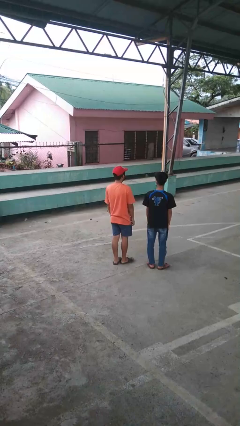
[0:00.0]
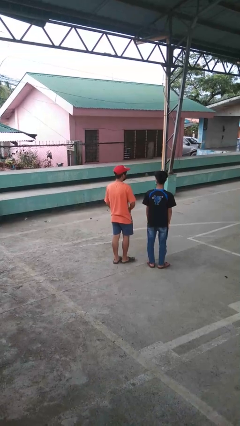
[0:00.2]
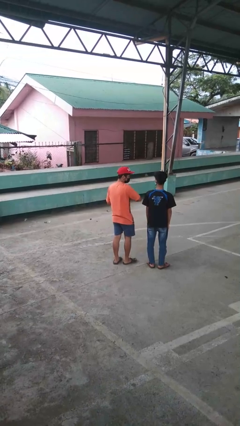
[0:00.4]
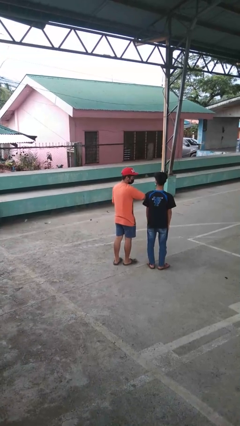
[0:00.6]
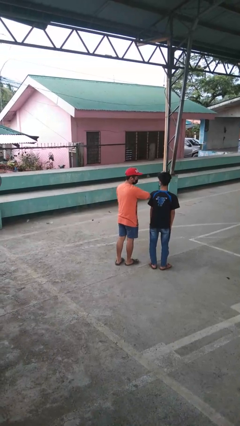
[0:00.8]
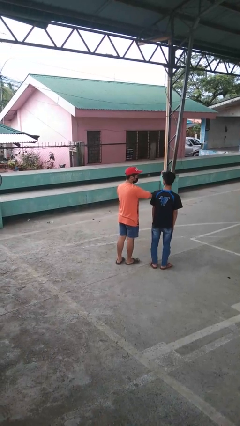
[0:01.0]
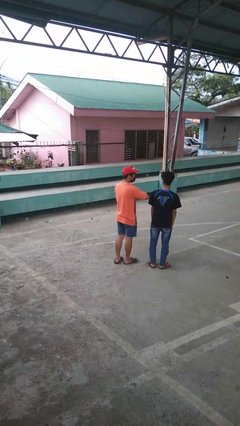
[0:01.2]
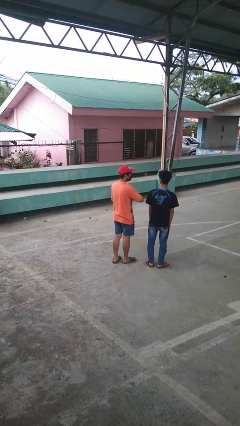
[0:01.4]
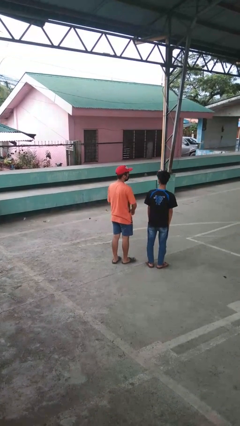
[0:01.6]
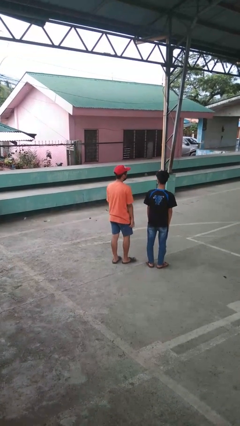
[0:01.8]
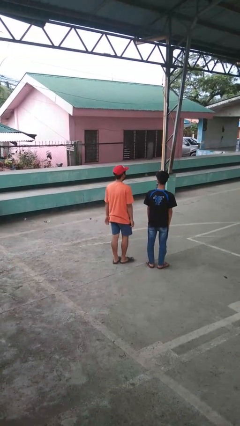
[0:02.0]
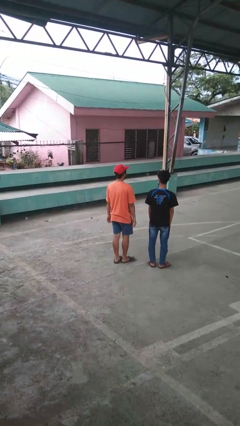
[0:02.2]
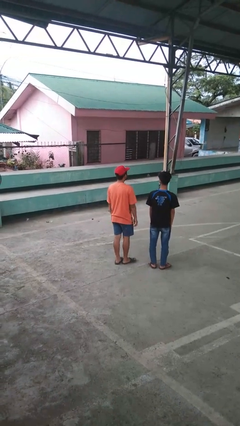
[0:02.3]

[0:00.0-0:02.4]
person nudges person with elbow

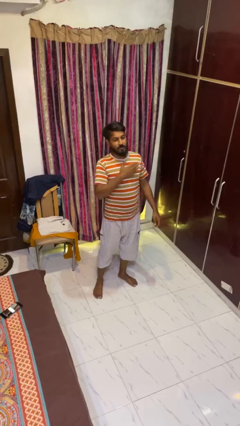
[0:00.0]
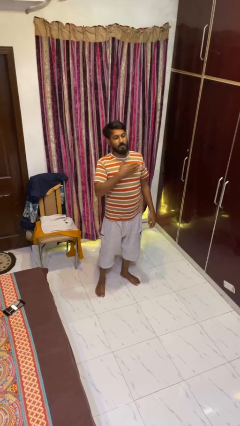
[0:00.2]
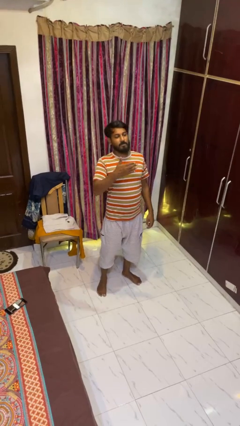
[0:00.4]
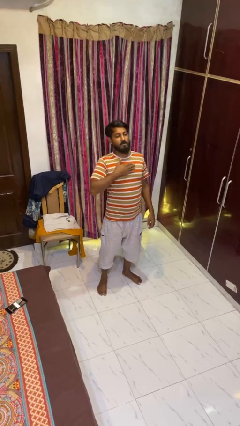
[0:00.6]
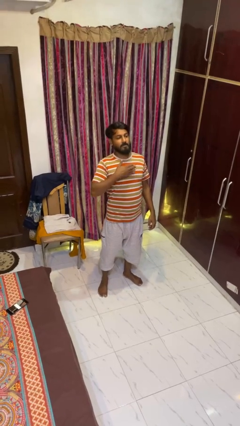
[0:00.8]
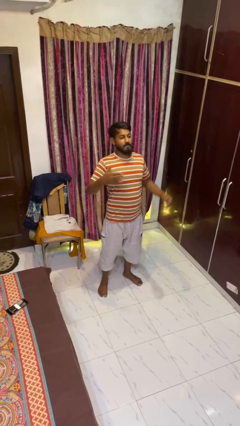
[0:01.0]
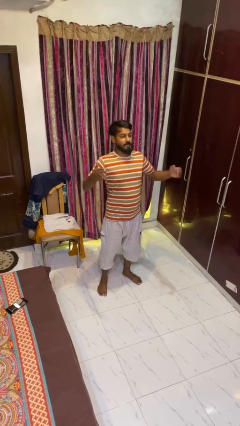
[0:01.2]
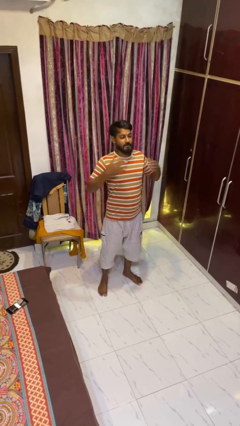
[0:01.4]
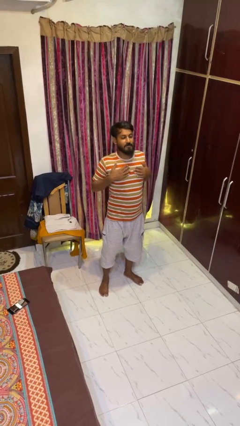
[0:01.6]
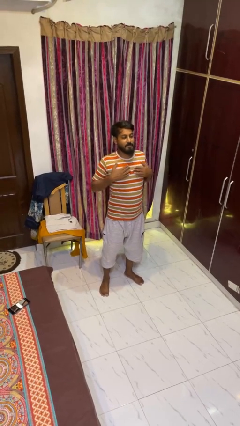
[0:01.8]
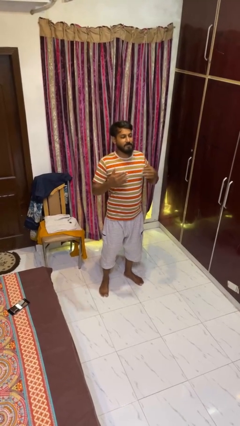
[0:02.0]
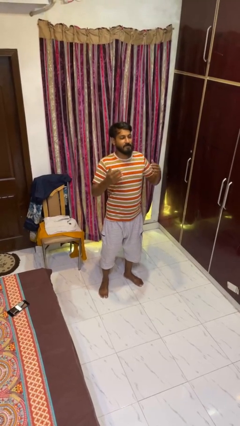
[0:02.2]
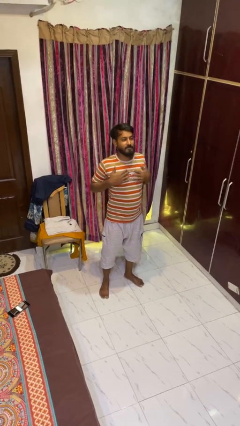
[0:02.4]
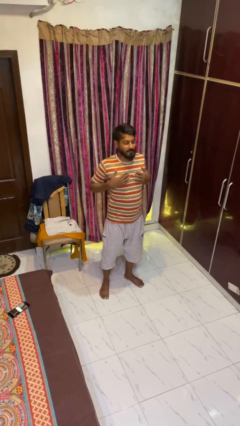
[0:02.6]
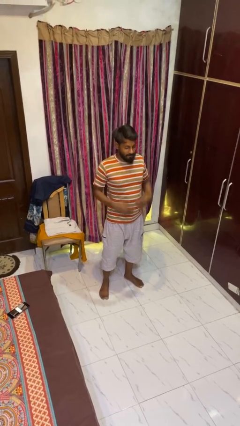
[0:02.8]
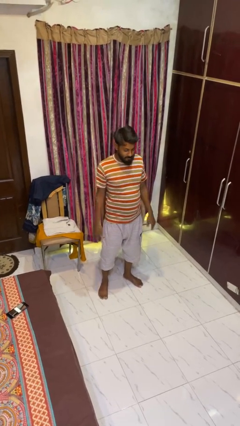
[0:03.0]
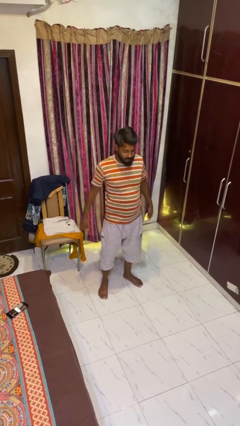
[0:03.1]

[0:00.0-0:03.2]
person drums on chest

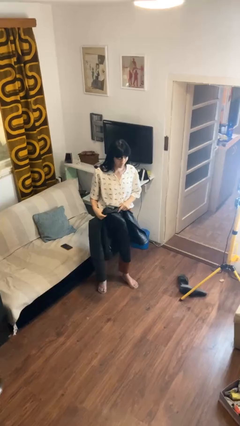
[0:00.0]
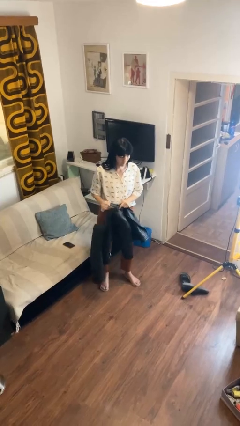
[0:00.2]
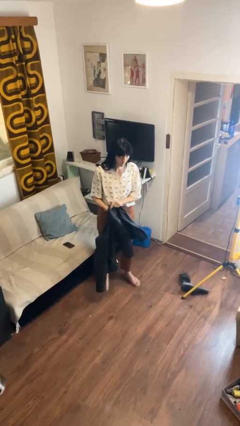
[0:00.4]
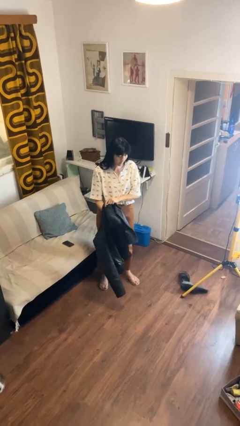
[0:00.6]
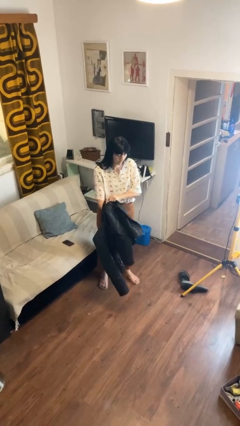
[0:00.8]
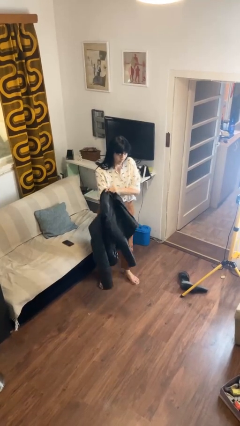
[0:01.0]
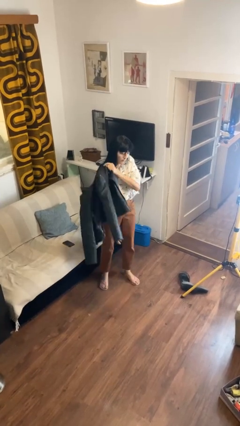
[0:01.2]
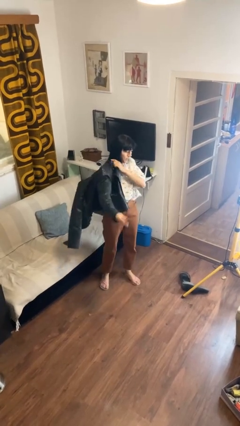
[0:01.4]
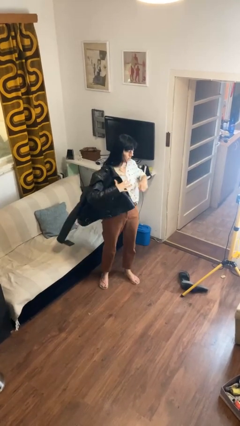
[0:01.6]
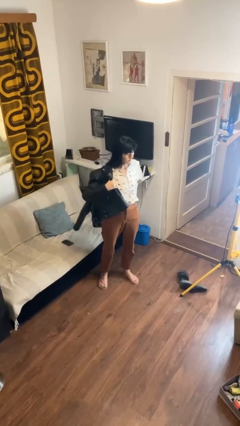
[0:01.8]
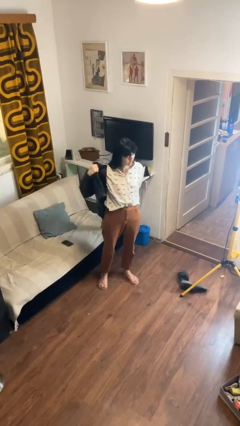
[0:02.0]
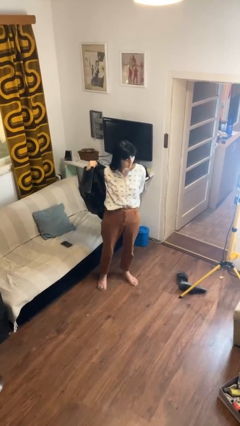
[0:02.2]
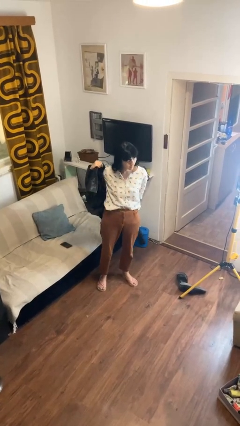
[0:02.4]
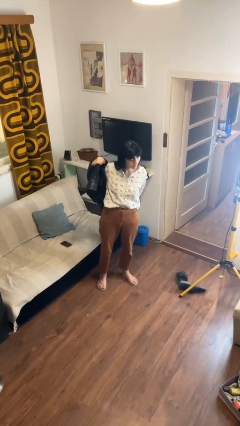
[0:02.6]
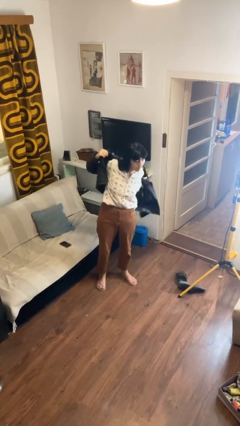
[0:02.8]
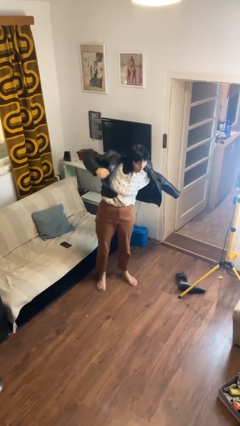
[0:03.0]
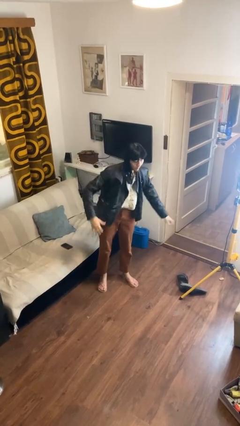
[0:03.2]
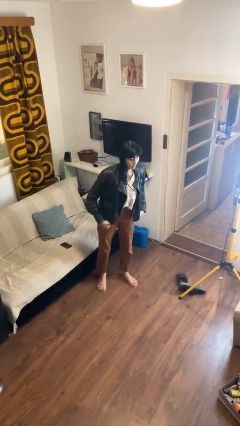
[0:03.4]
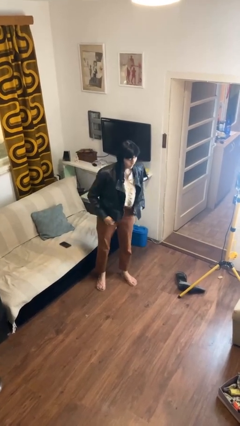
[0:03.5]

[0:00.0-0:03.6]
person puts on jacket

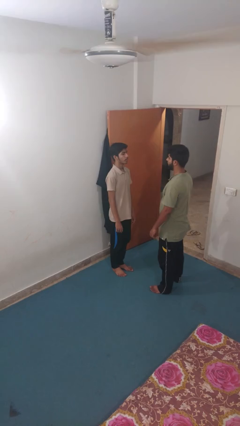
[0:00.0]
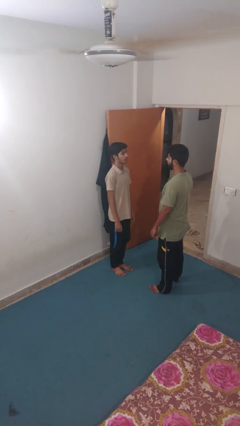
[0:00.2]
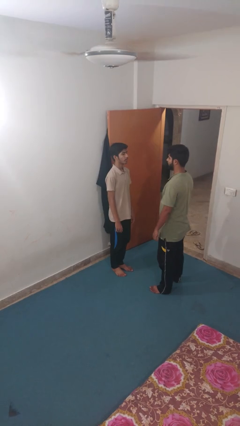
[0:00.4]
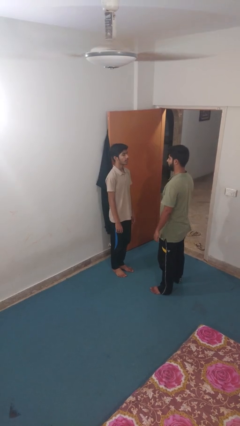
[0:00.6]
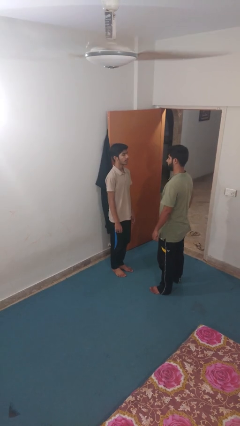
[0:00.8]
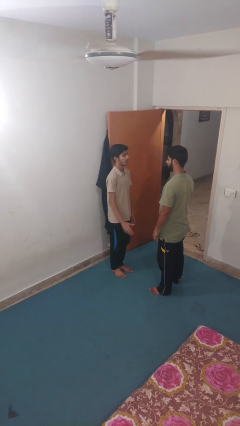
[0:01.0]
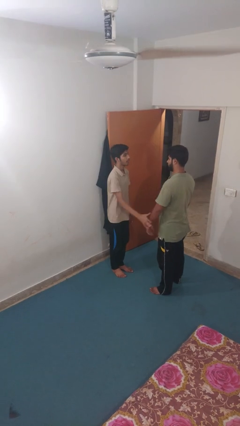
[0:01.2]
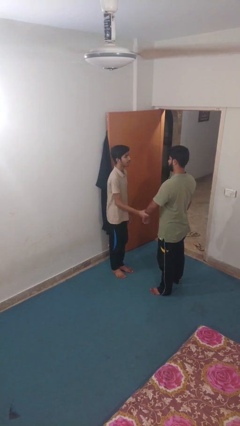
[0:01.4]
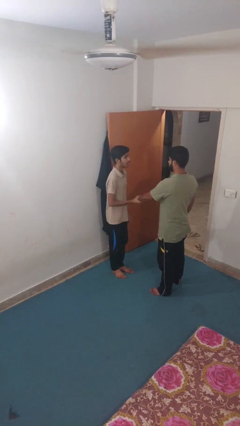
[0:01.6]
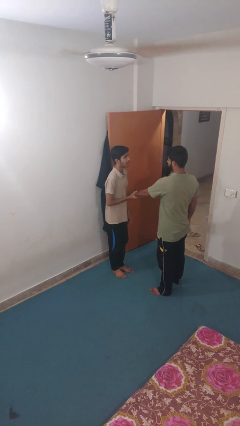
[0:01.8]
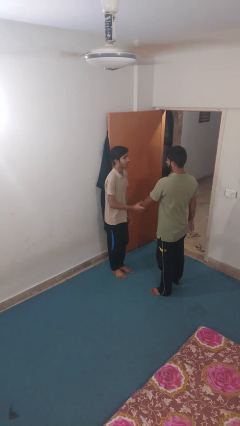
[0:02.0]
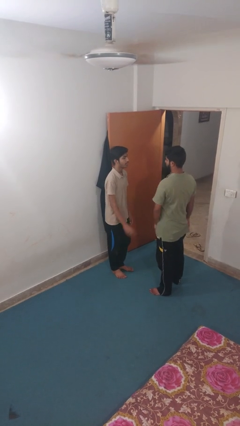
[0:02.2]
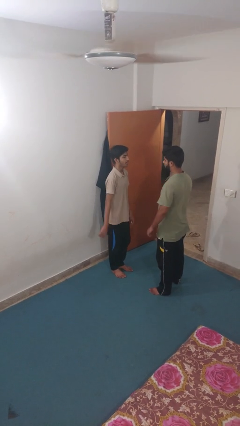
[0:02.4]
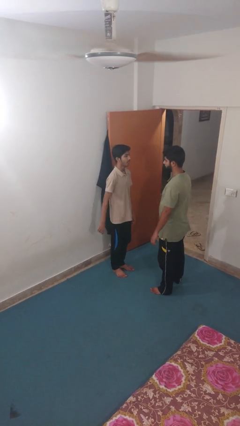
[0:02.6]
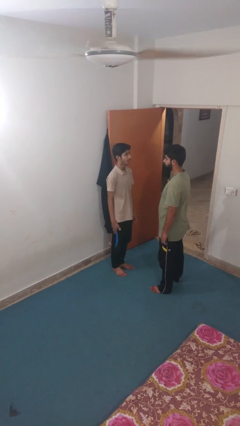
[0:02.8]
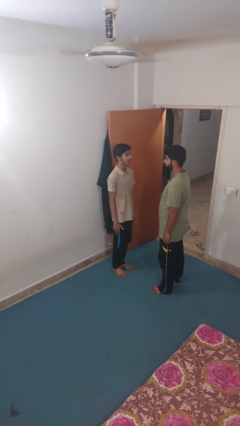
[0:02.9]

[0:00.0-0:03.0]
person grabs person by forearm

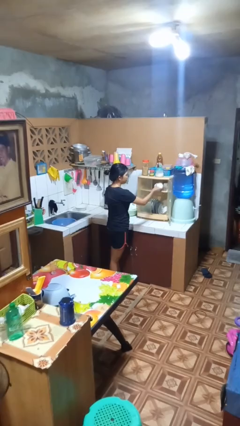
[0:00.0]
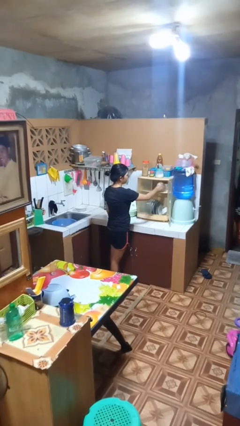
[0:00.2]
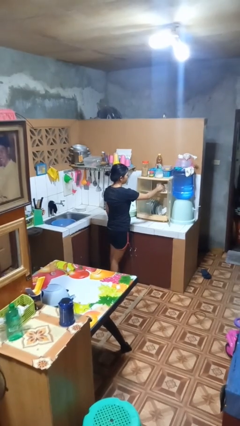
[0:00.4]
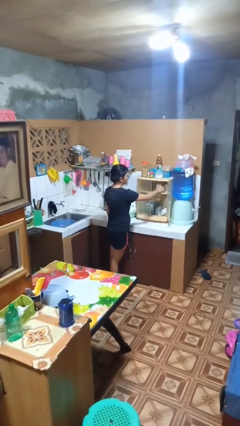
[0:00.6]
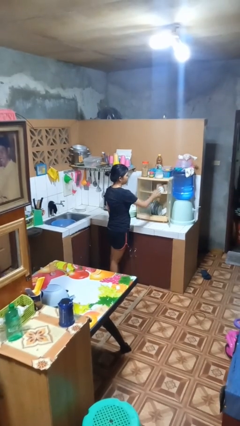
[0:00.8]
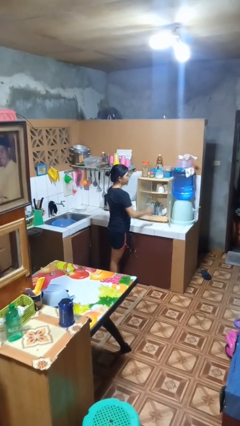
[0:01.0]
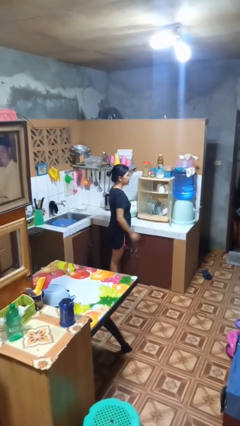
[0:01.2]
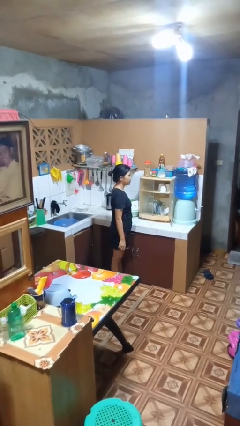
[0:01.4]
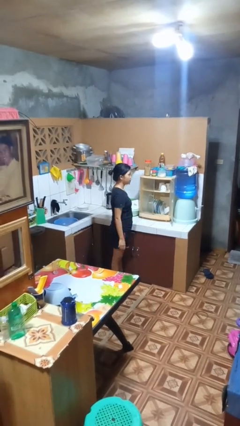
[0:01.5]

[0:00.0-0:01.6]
person puts object into kitchen drawer

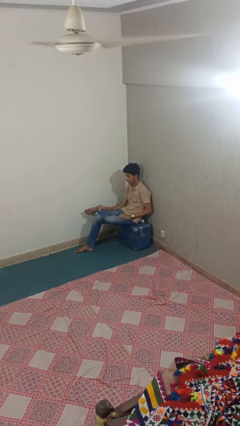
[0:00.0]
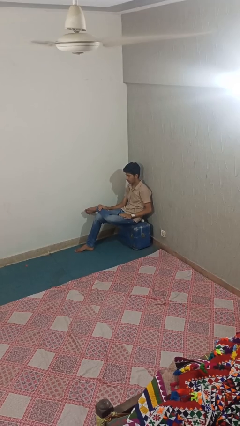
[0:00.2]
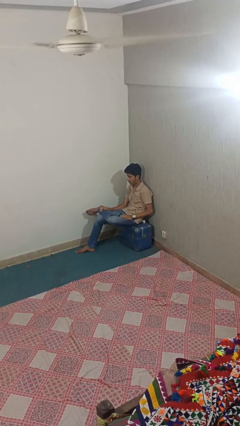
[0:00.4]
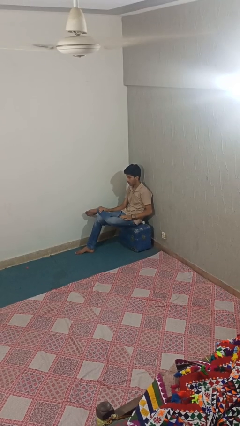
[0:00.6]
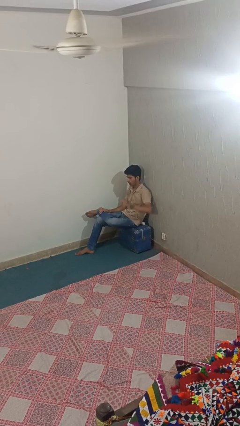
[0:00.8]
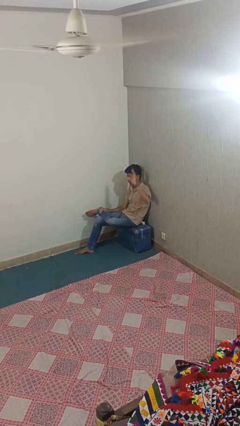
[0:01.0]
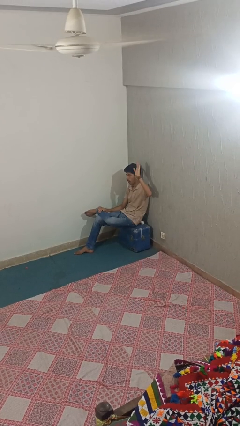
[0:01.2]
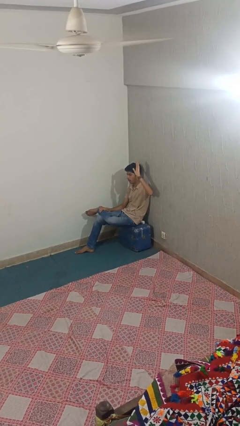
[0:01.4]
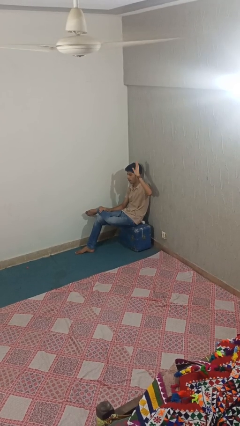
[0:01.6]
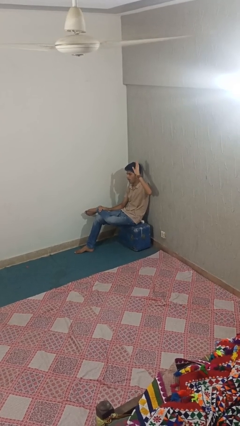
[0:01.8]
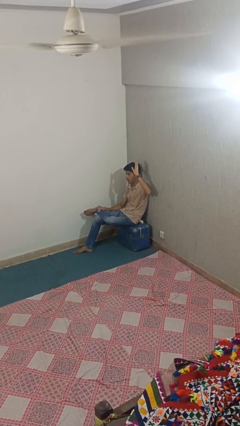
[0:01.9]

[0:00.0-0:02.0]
person gestures raise hand

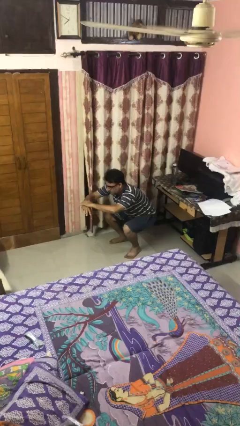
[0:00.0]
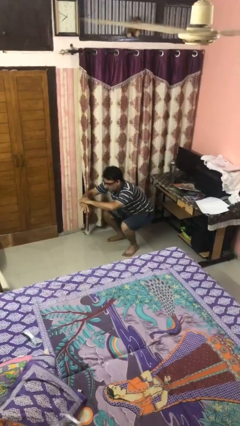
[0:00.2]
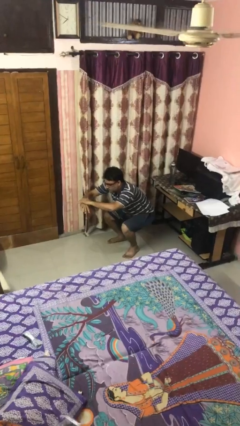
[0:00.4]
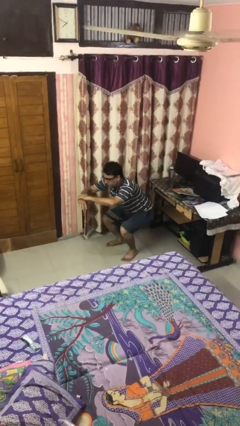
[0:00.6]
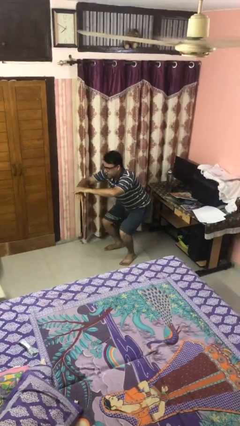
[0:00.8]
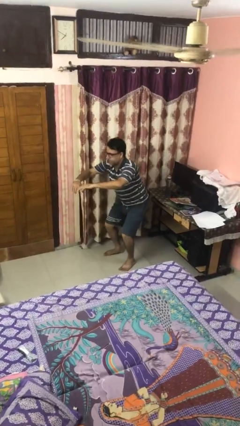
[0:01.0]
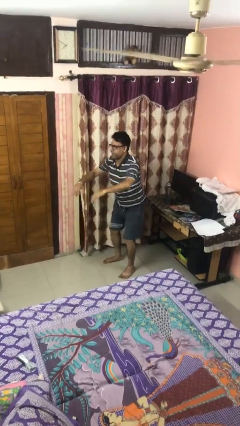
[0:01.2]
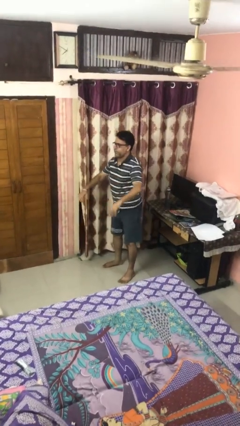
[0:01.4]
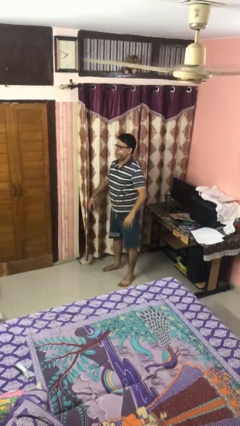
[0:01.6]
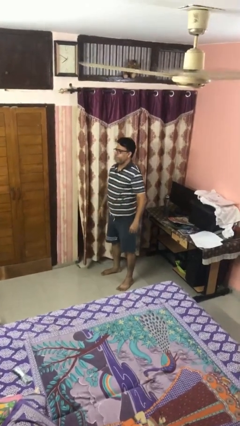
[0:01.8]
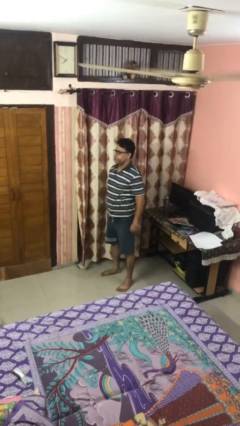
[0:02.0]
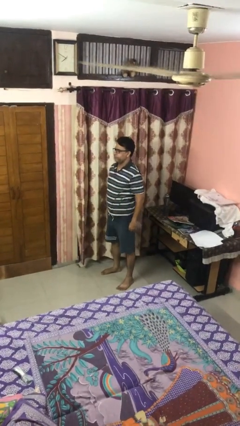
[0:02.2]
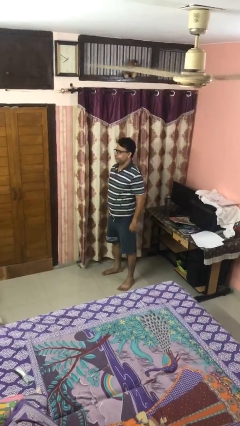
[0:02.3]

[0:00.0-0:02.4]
person stands up
